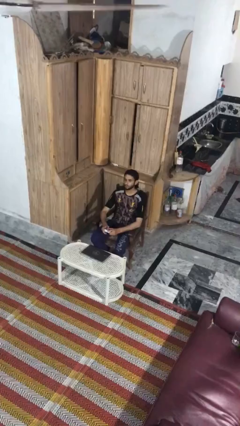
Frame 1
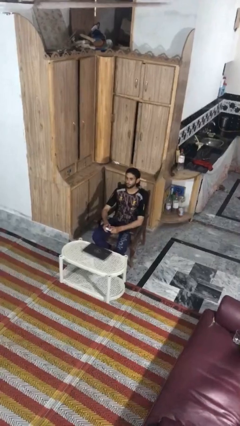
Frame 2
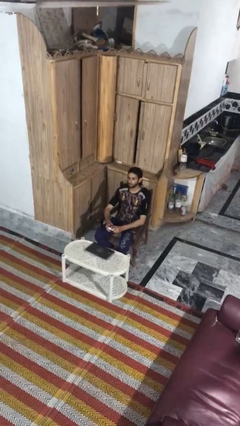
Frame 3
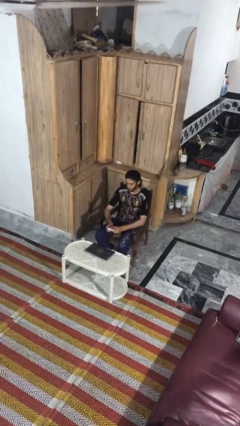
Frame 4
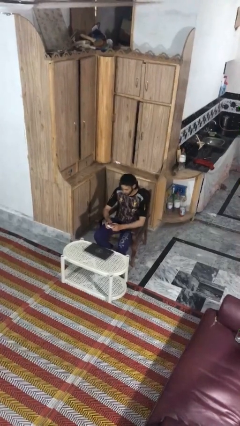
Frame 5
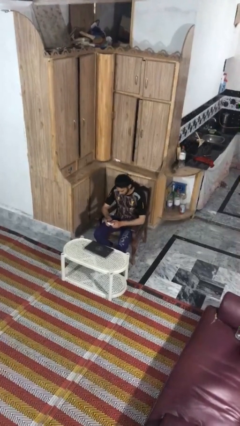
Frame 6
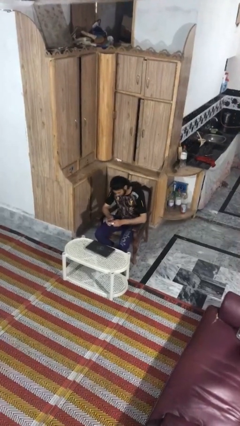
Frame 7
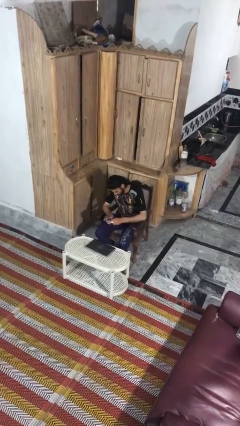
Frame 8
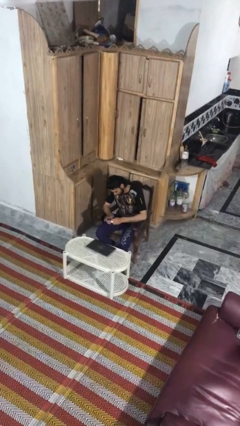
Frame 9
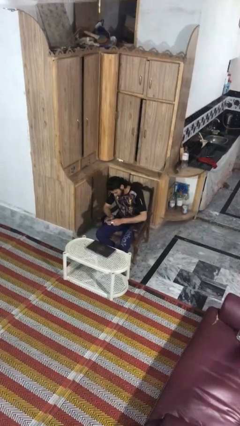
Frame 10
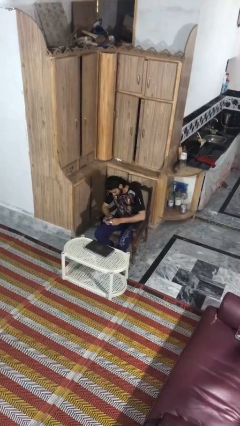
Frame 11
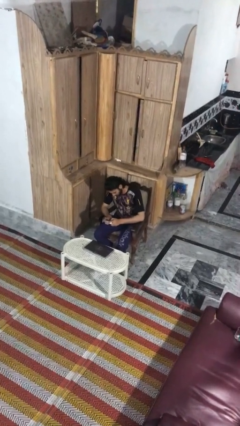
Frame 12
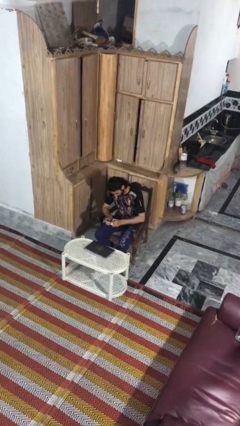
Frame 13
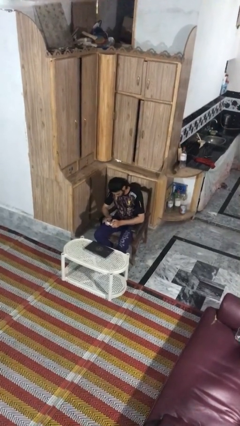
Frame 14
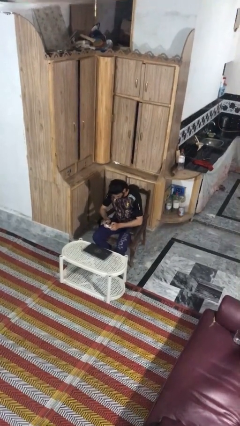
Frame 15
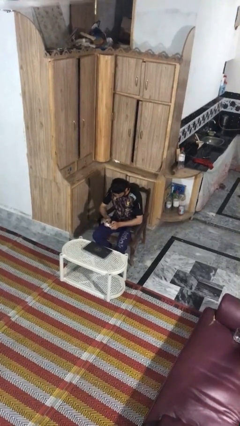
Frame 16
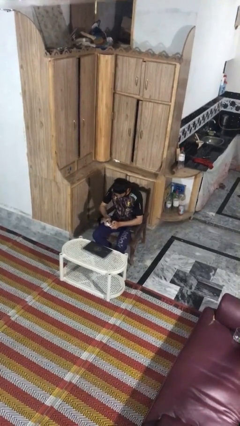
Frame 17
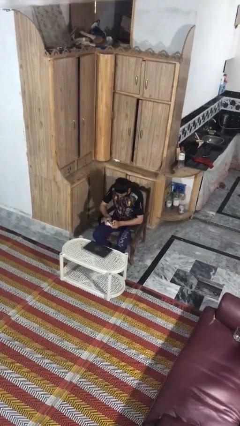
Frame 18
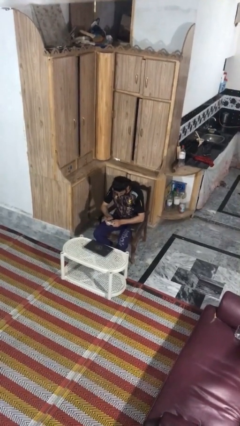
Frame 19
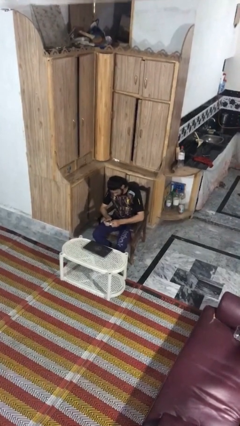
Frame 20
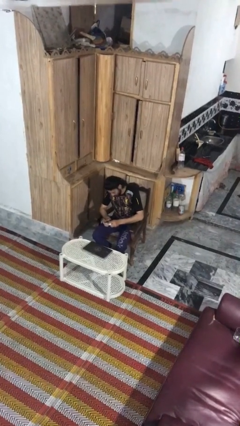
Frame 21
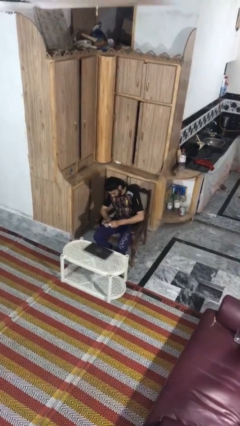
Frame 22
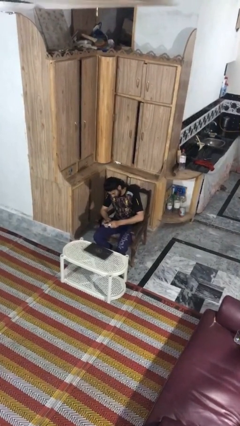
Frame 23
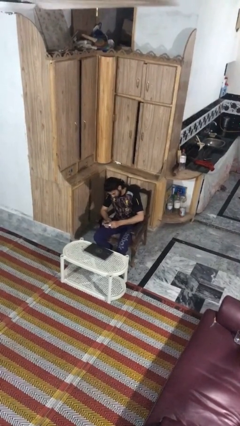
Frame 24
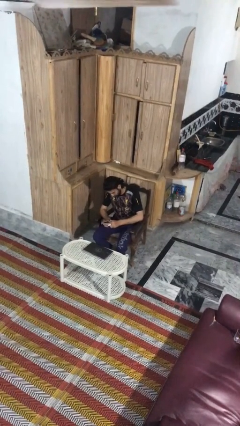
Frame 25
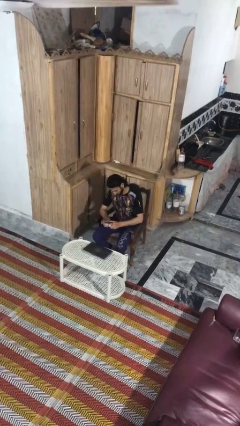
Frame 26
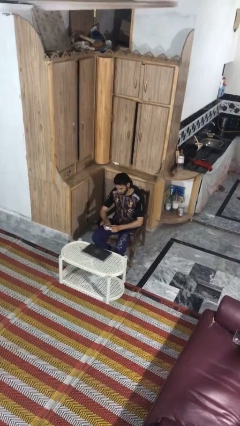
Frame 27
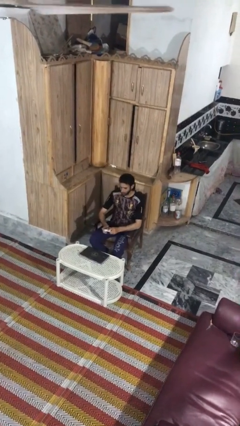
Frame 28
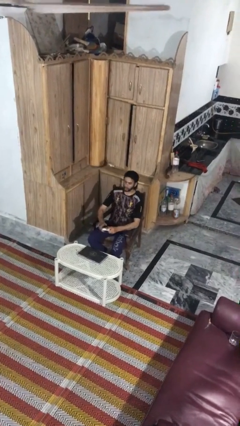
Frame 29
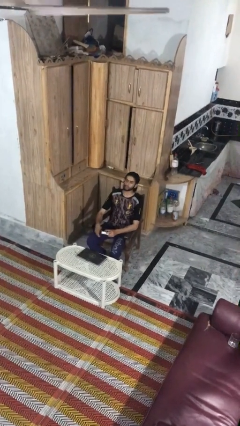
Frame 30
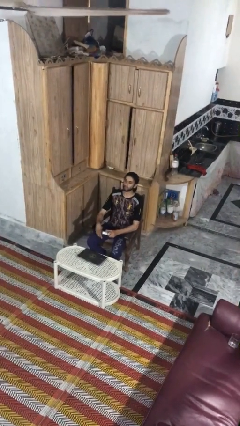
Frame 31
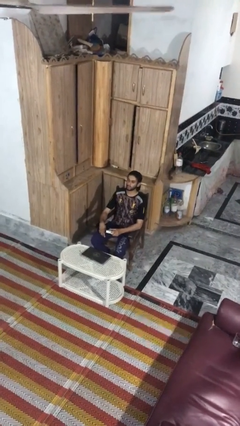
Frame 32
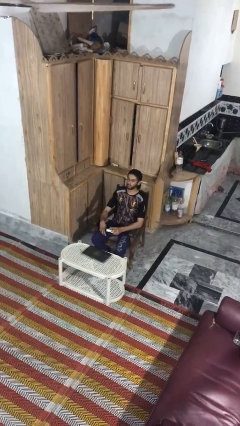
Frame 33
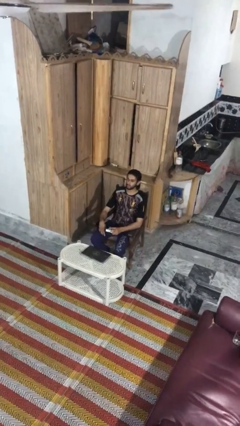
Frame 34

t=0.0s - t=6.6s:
person interacts with handheld game

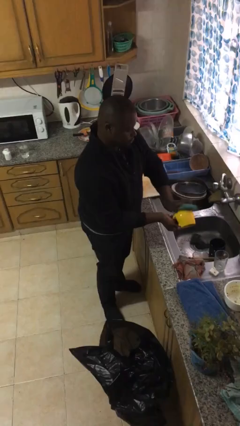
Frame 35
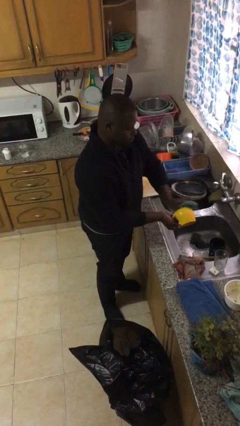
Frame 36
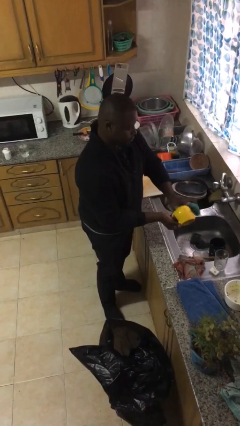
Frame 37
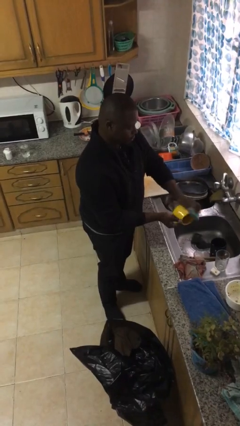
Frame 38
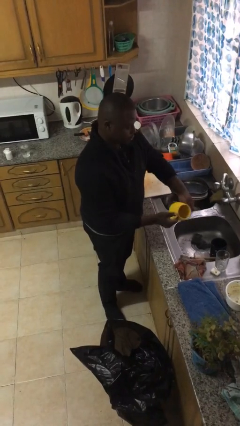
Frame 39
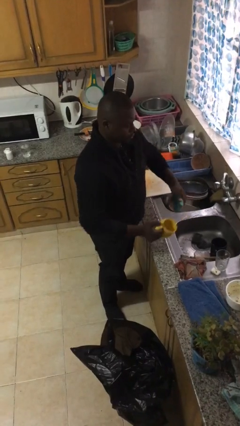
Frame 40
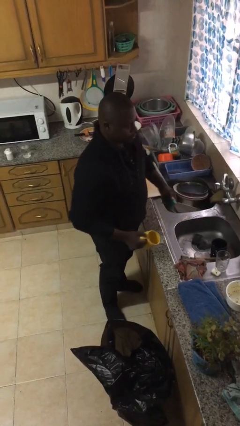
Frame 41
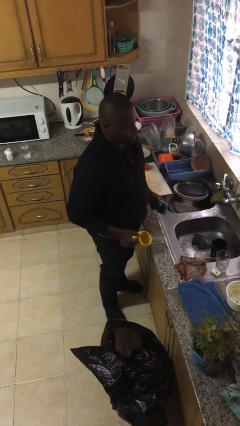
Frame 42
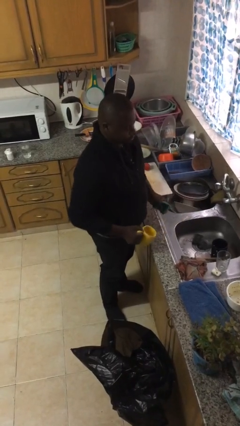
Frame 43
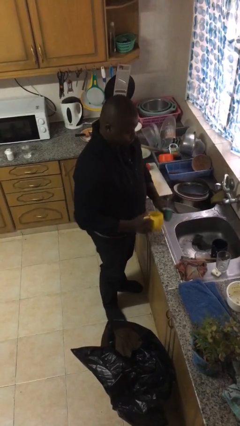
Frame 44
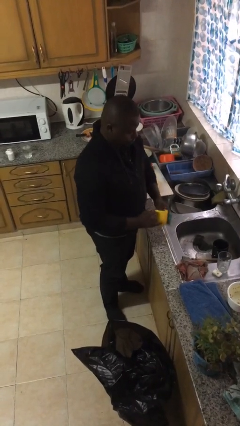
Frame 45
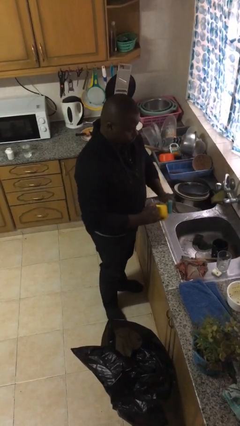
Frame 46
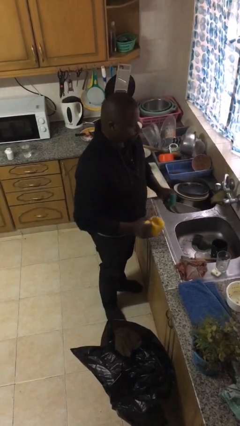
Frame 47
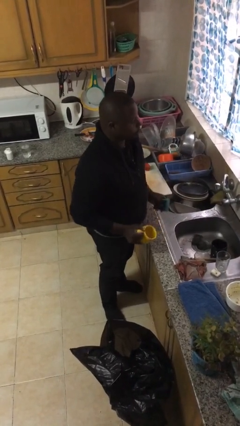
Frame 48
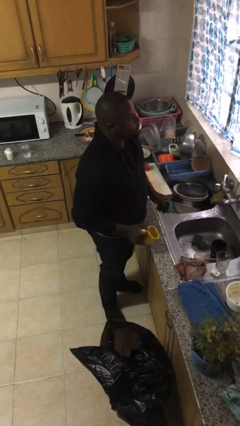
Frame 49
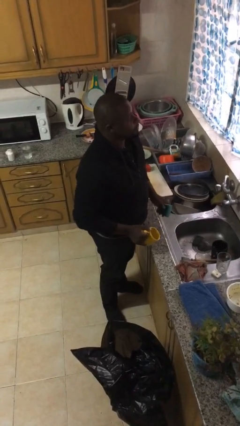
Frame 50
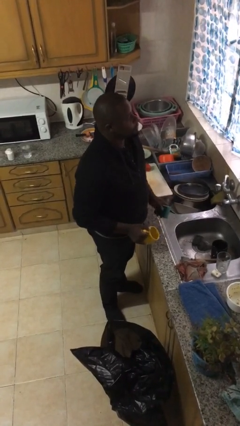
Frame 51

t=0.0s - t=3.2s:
person washes dish

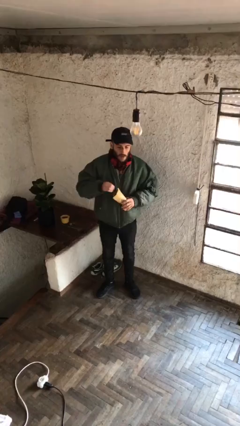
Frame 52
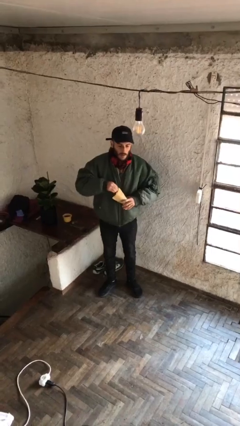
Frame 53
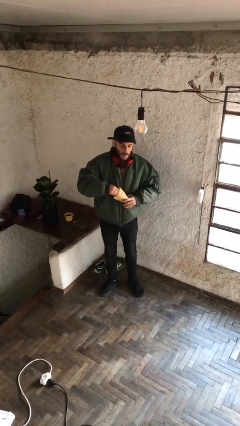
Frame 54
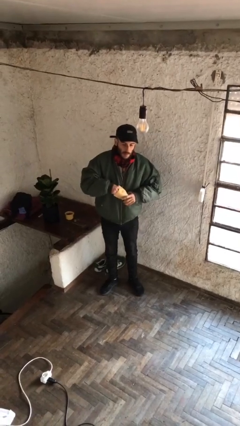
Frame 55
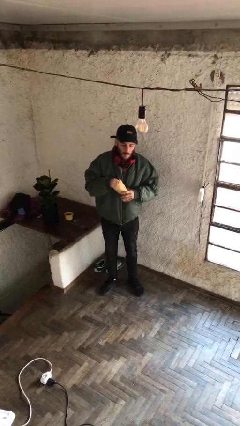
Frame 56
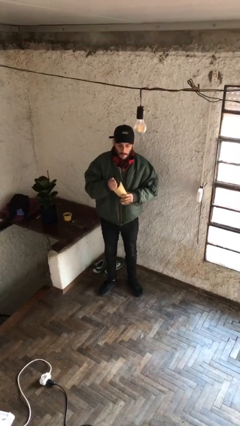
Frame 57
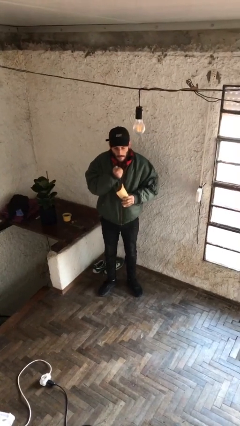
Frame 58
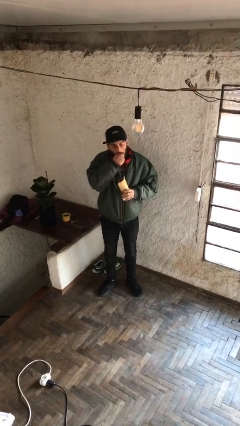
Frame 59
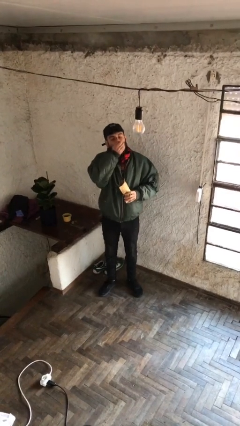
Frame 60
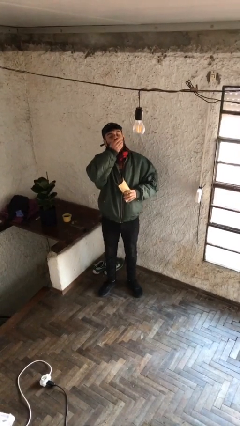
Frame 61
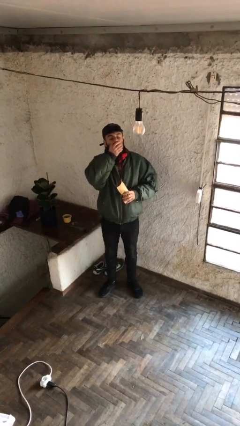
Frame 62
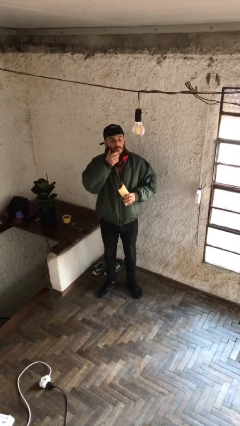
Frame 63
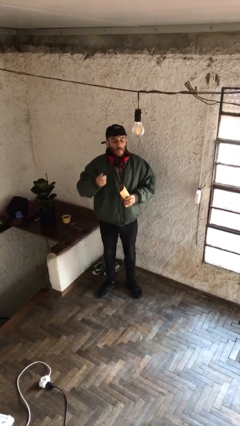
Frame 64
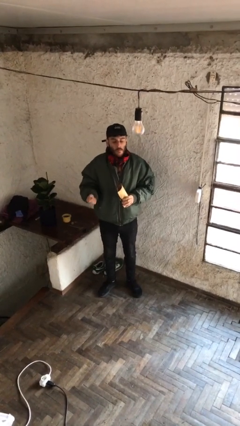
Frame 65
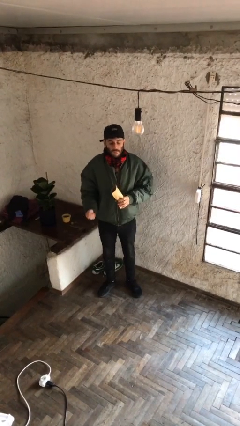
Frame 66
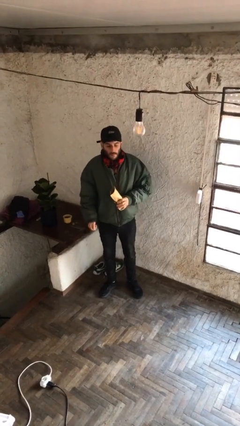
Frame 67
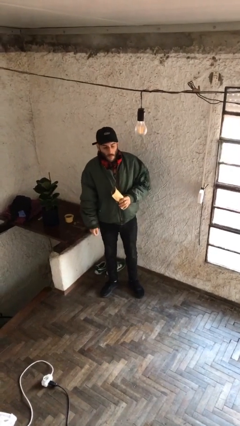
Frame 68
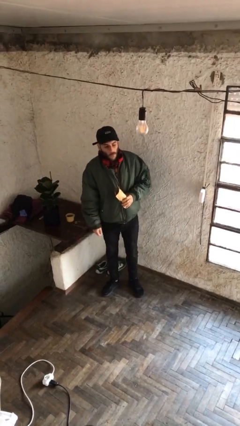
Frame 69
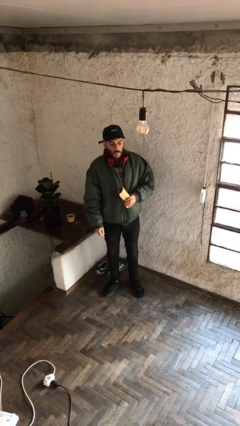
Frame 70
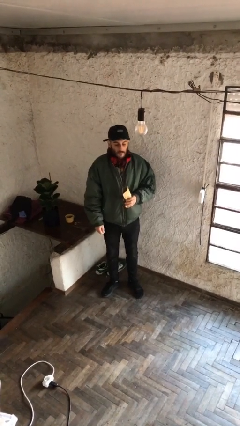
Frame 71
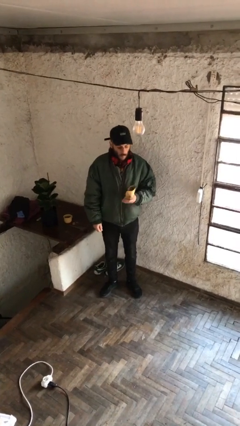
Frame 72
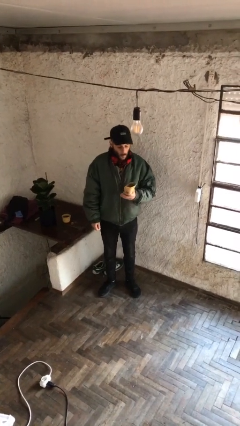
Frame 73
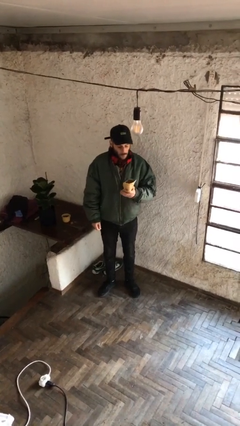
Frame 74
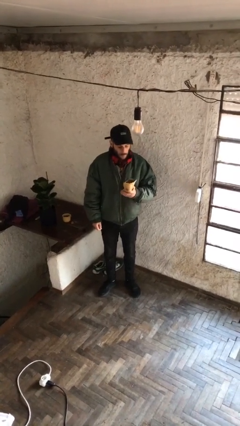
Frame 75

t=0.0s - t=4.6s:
person eats snack from bag

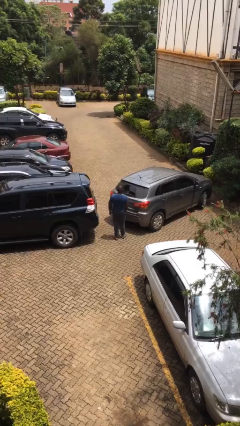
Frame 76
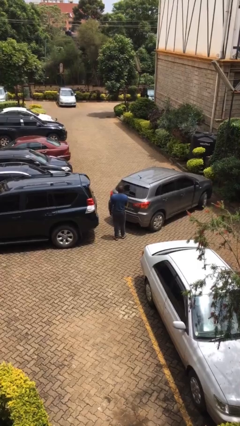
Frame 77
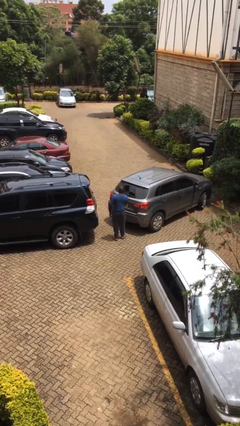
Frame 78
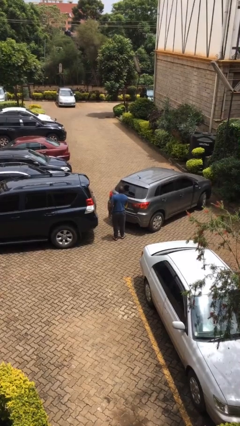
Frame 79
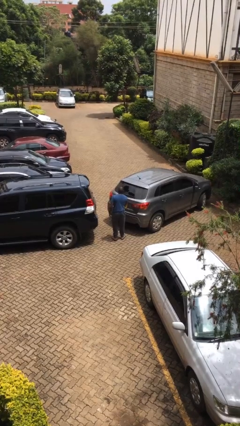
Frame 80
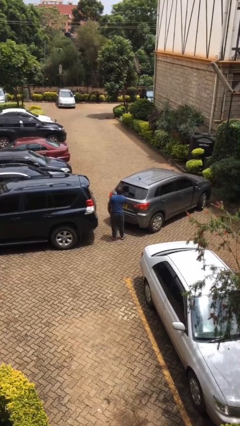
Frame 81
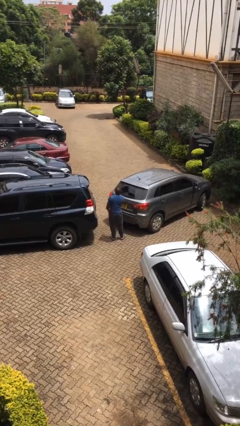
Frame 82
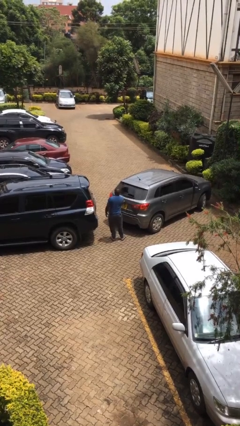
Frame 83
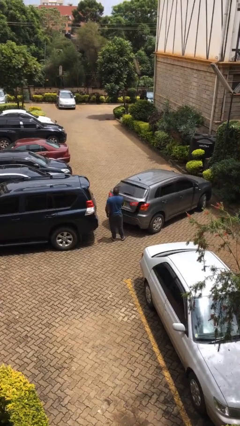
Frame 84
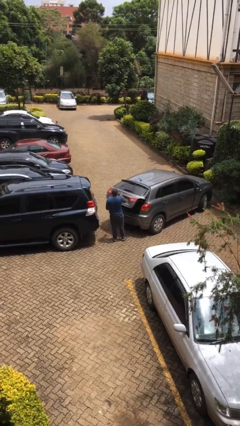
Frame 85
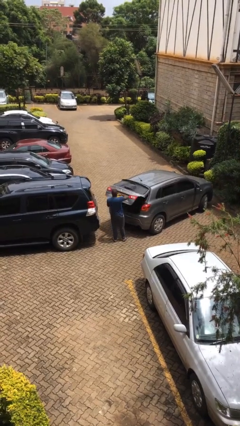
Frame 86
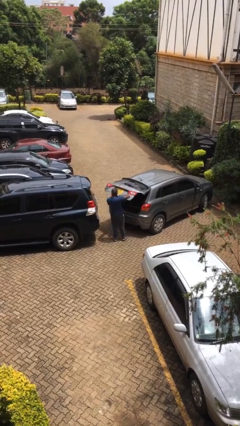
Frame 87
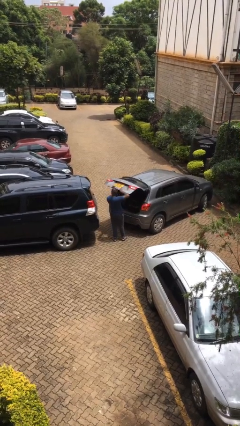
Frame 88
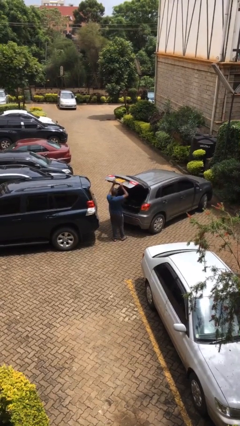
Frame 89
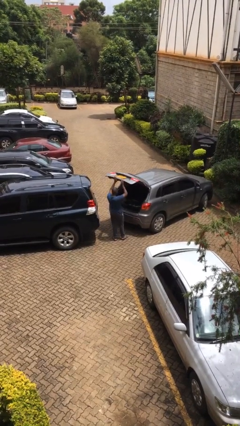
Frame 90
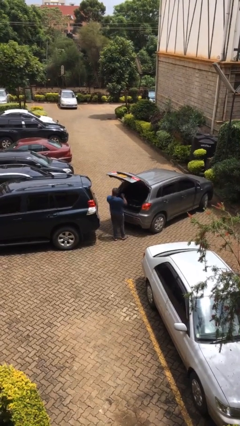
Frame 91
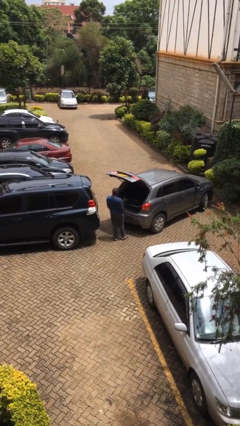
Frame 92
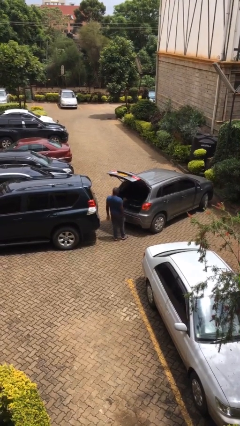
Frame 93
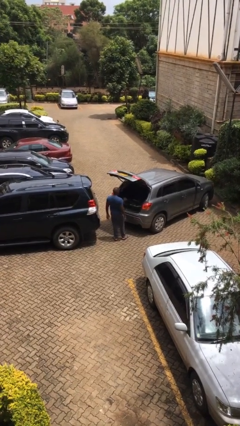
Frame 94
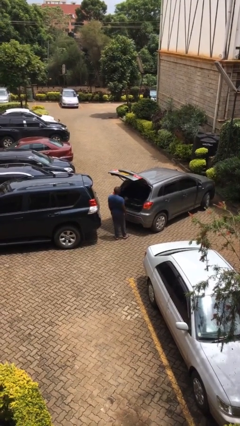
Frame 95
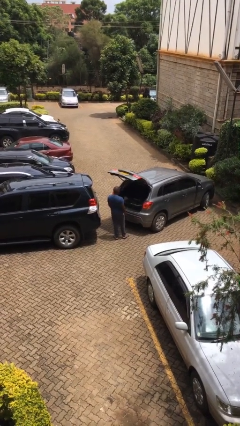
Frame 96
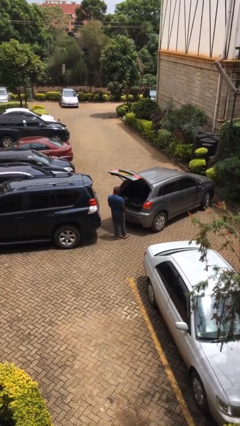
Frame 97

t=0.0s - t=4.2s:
person opens car trunk
